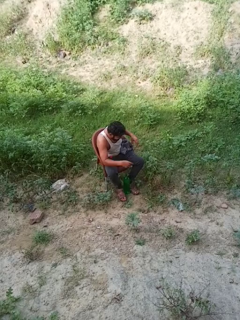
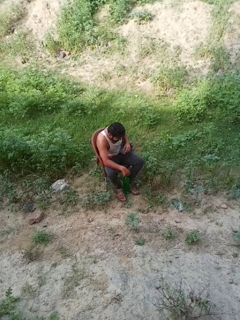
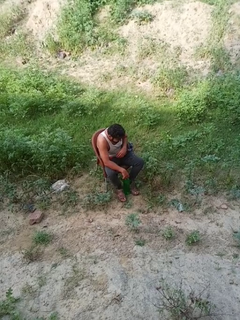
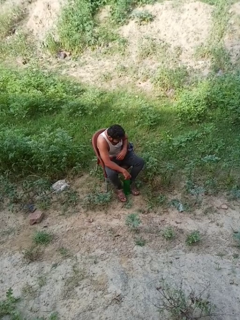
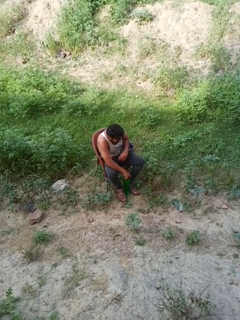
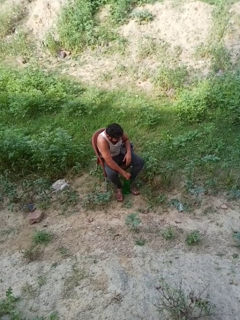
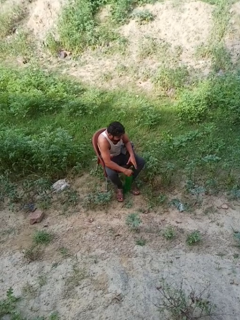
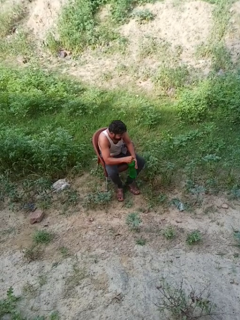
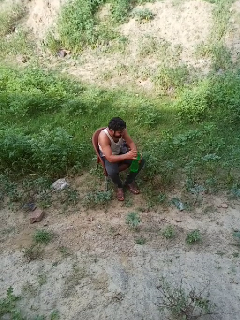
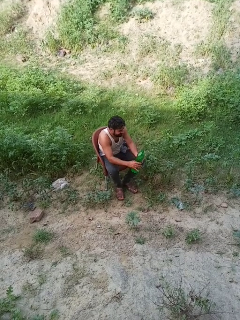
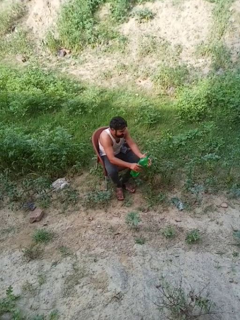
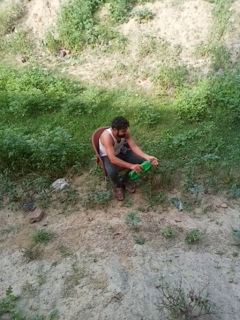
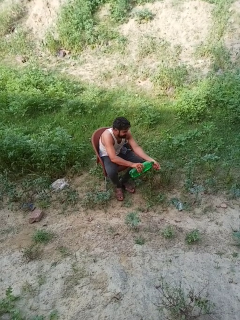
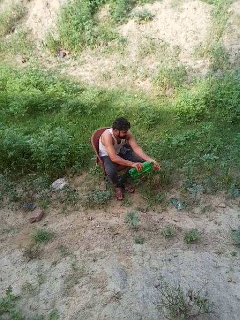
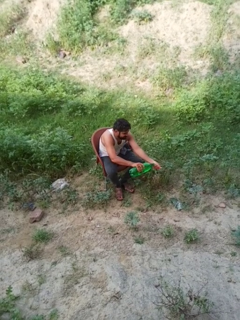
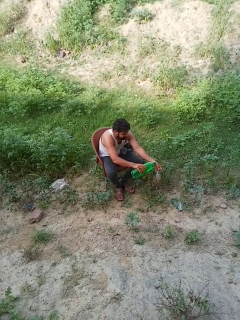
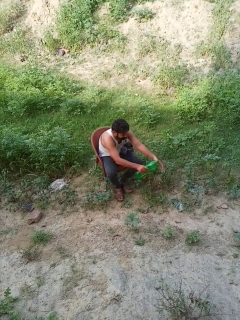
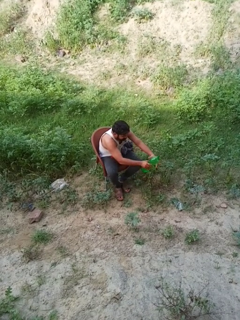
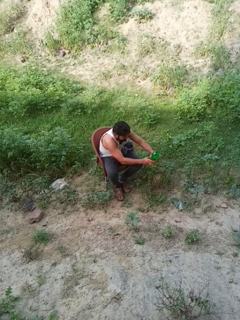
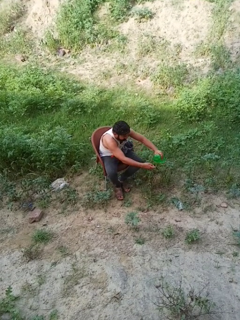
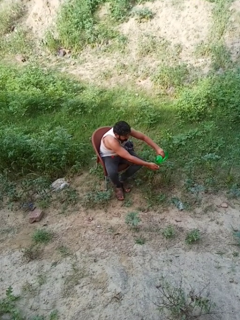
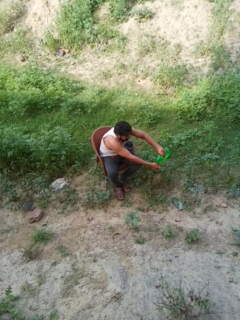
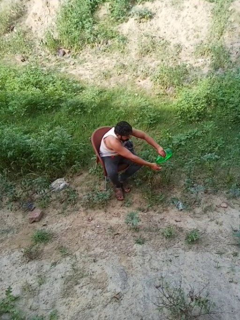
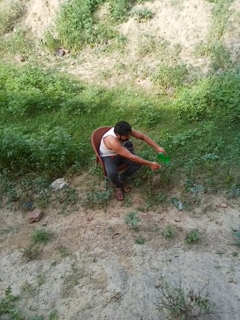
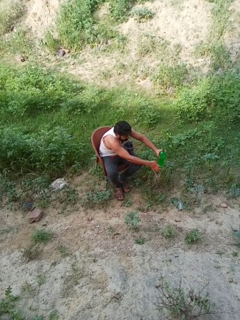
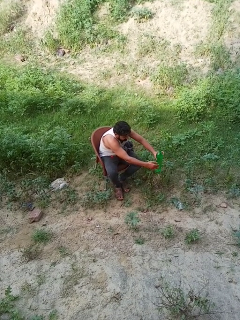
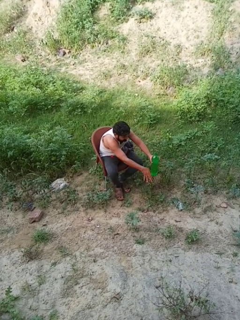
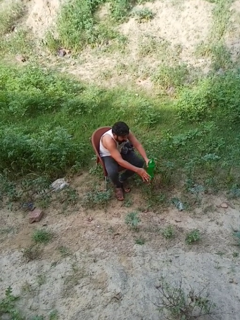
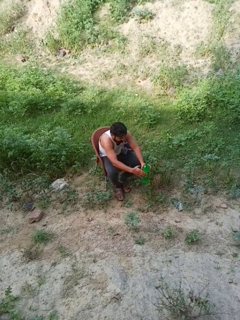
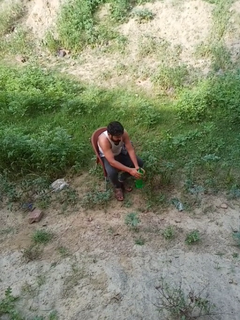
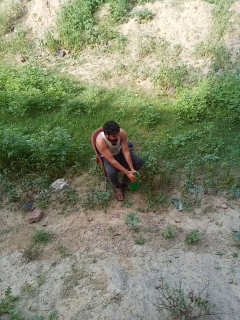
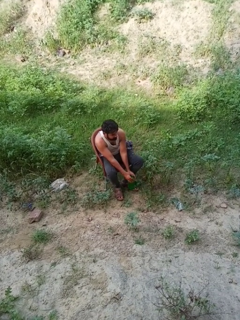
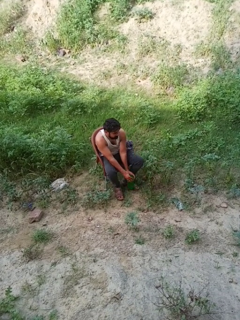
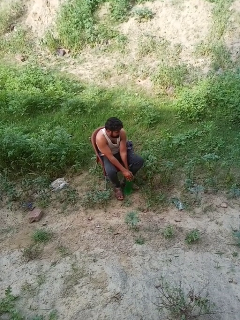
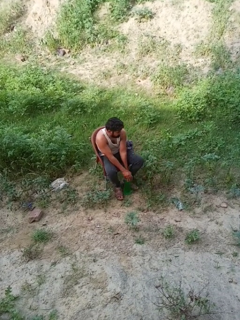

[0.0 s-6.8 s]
person washes hands

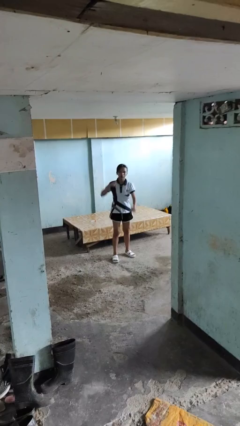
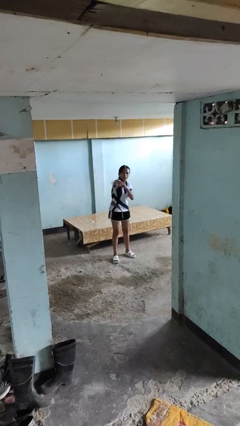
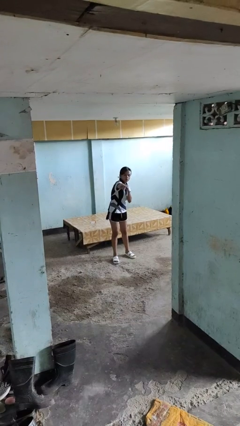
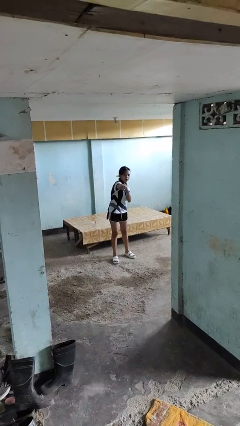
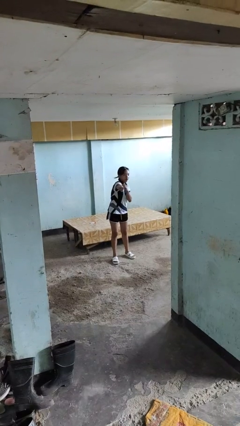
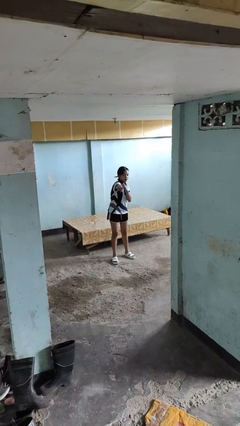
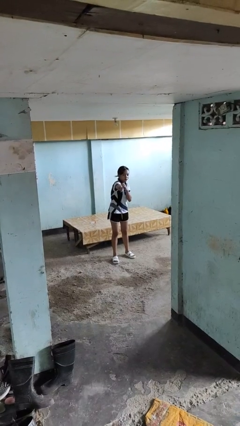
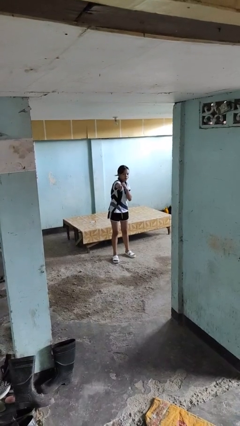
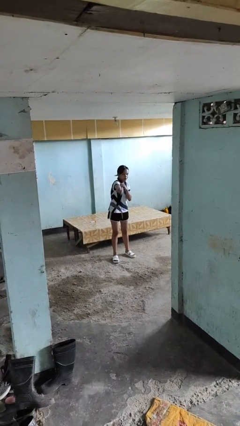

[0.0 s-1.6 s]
person punches

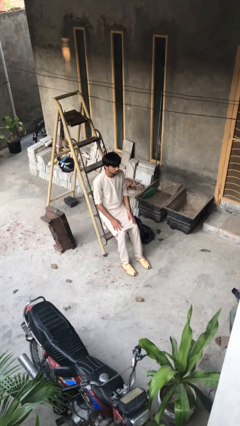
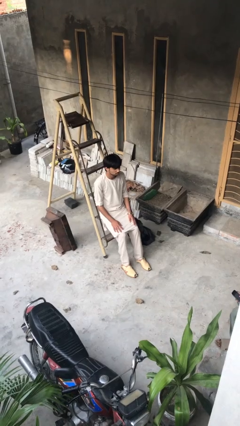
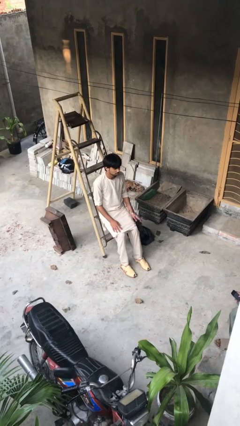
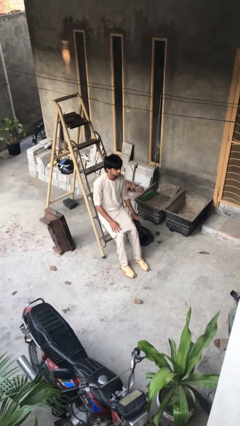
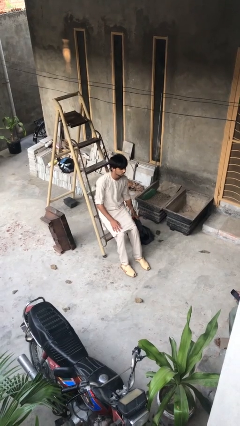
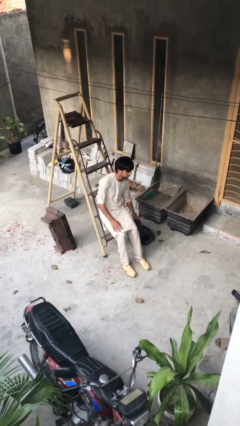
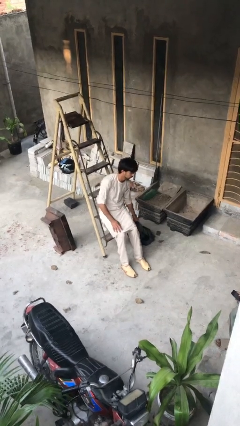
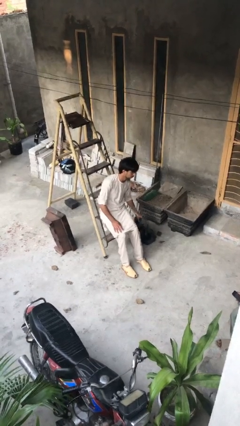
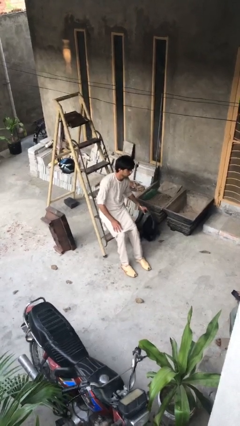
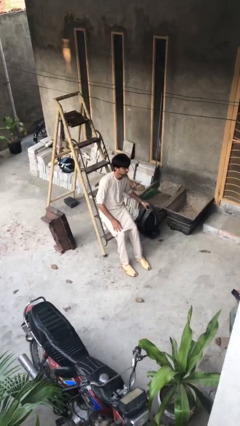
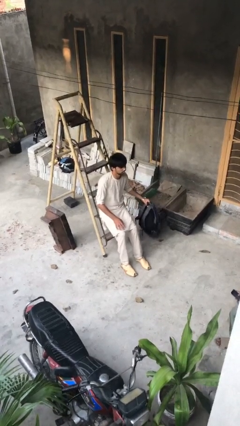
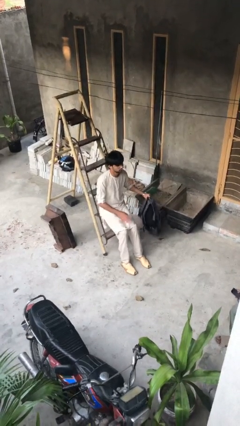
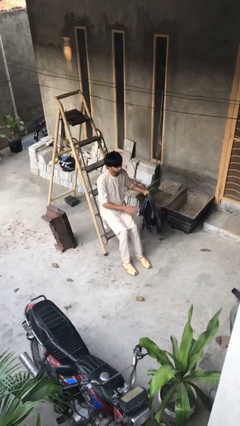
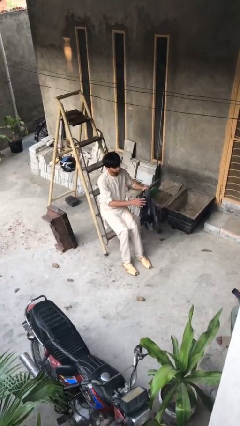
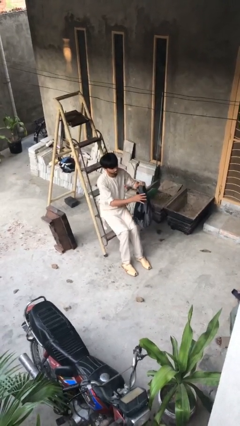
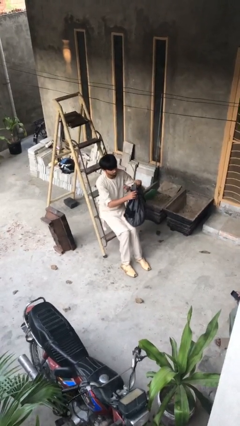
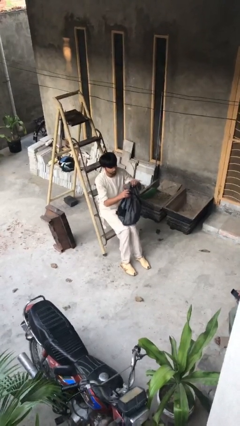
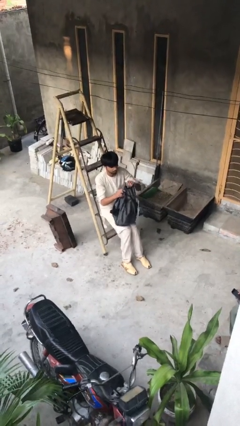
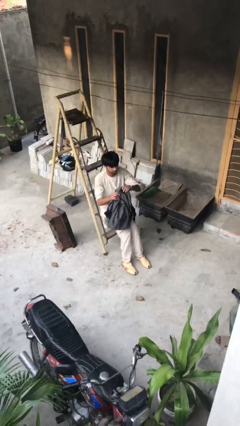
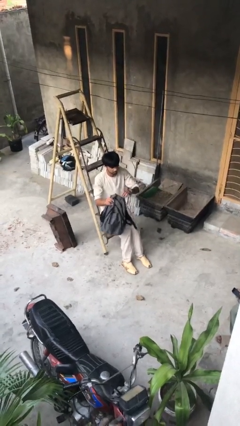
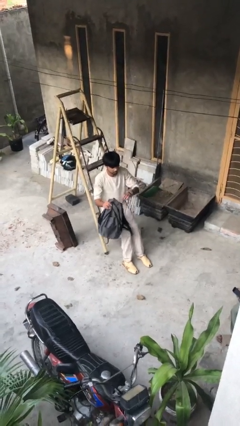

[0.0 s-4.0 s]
person picks up object from floor

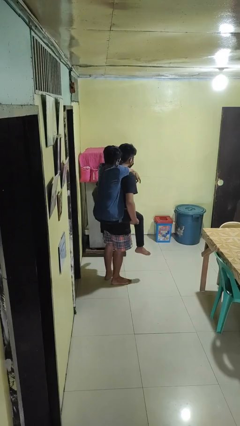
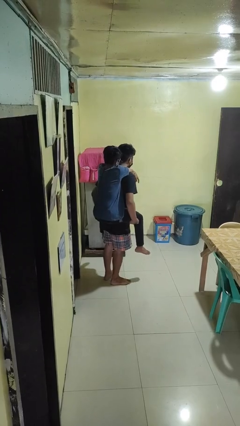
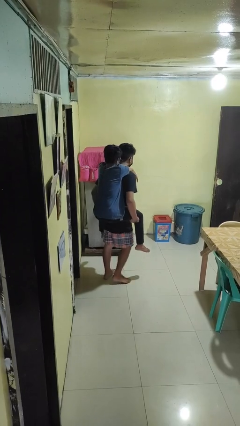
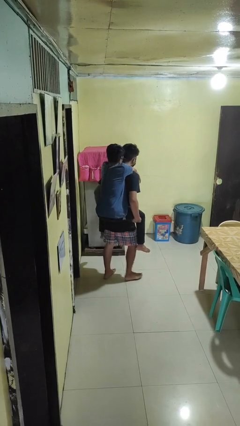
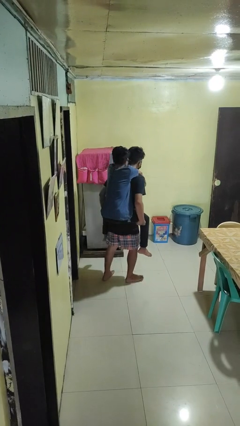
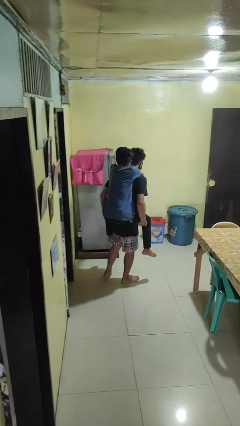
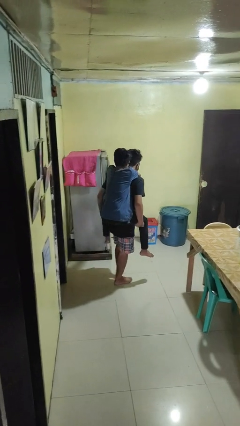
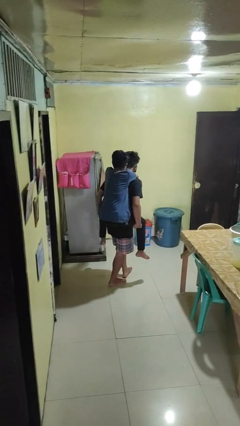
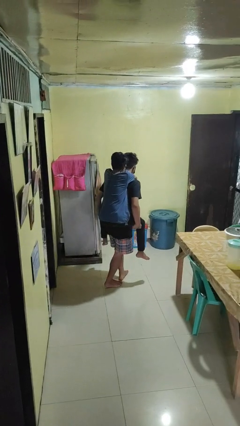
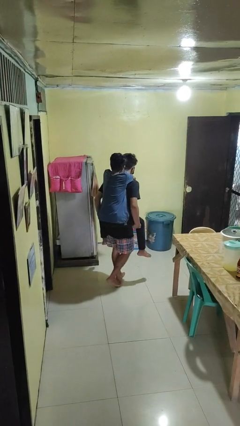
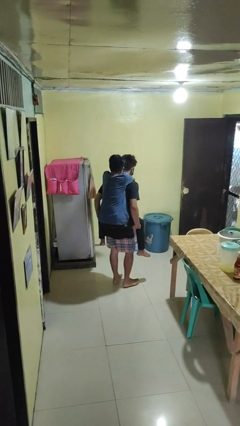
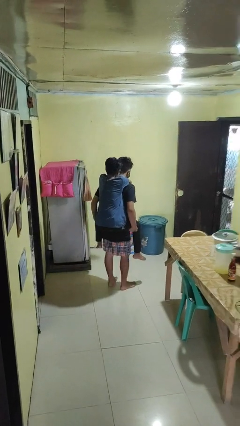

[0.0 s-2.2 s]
person carries person on back

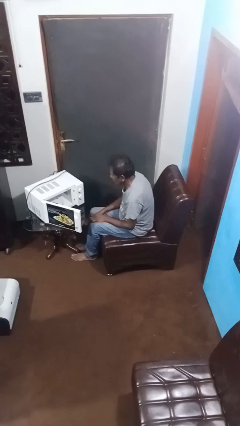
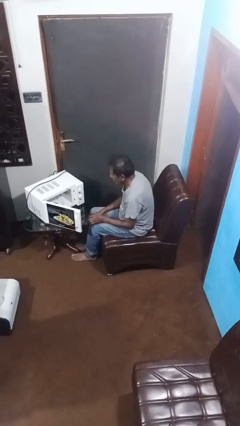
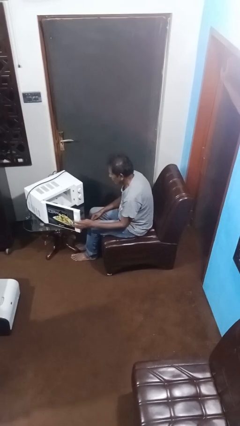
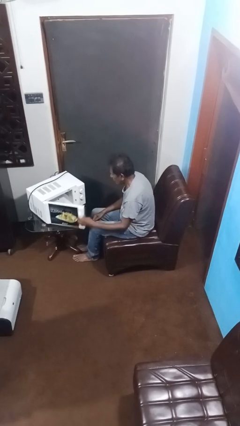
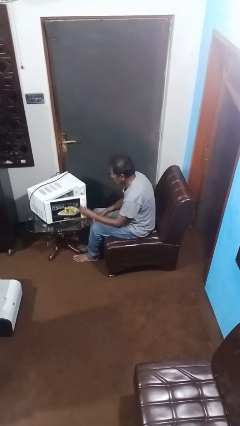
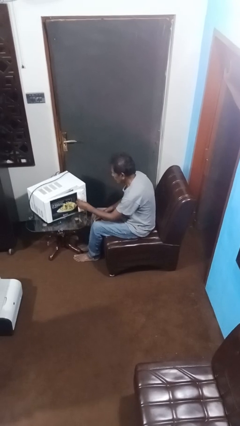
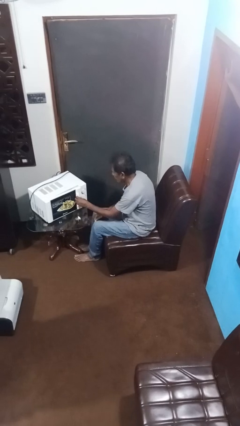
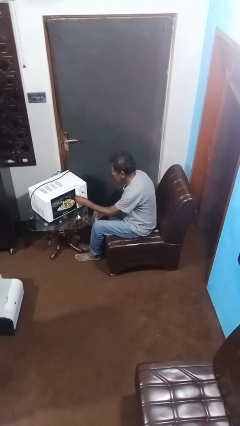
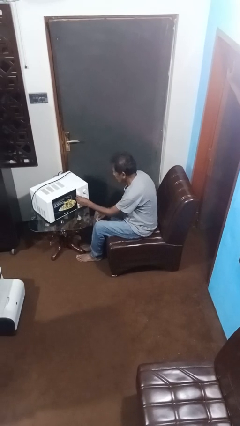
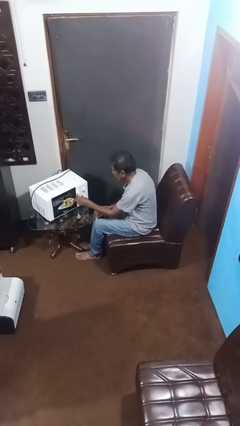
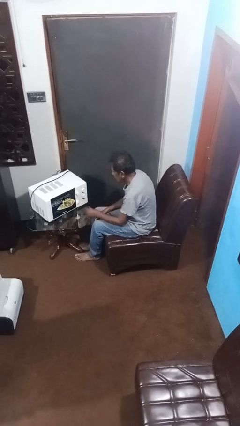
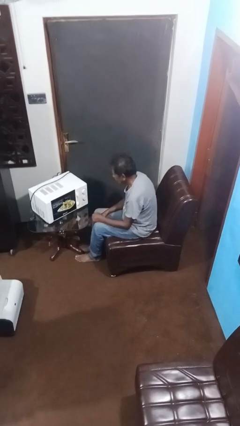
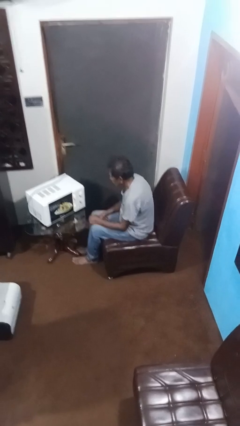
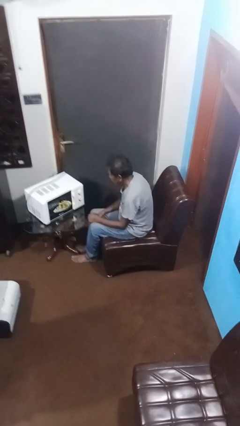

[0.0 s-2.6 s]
person closes microwave

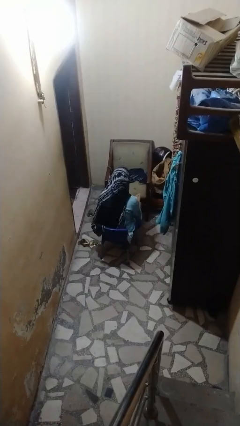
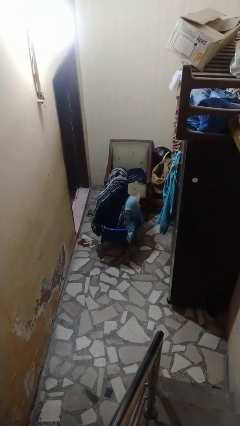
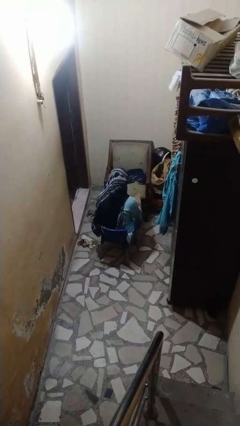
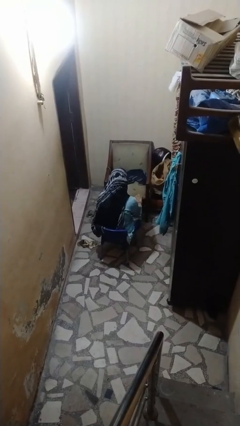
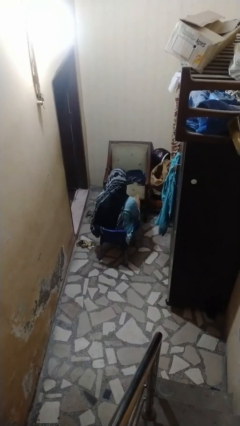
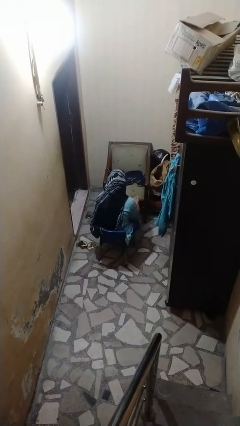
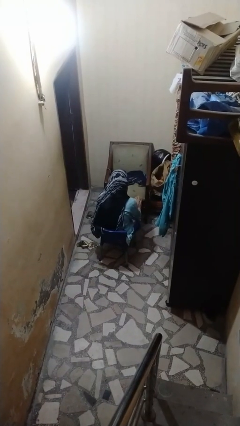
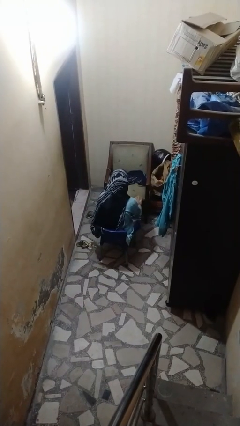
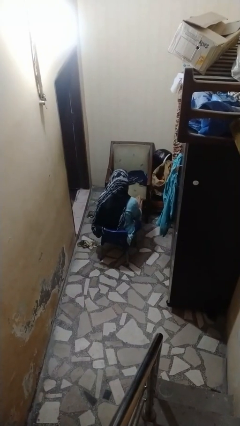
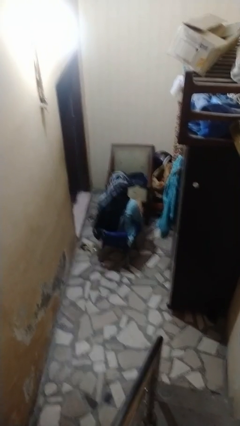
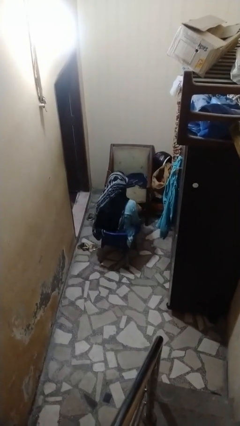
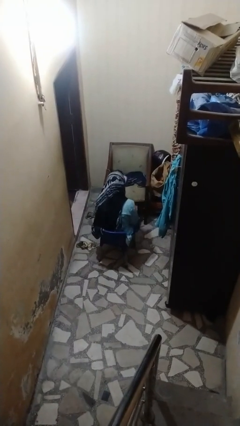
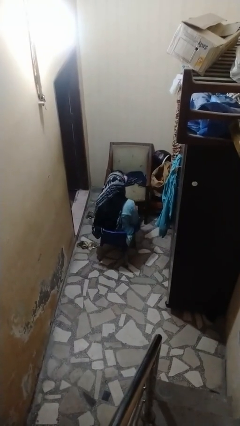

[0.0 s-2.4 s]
person rubs foot
